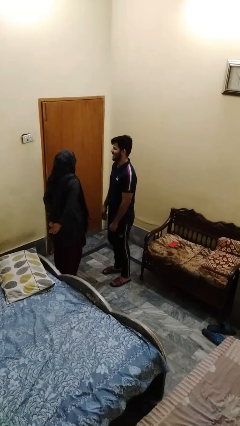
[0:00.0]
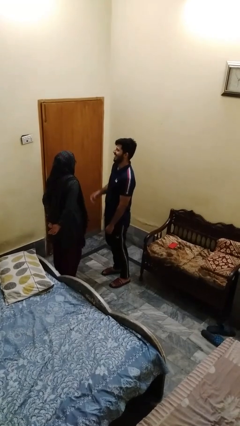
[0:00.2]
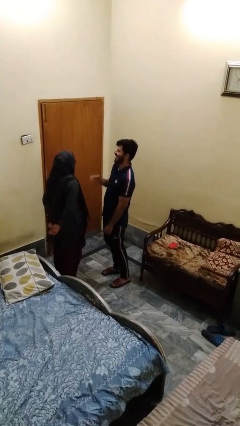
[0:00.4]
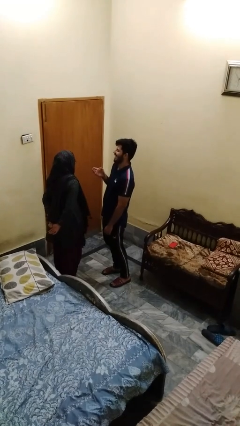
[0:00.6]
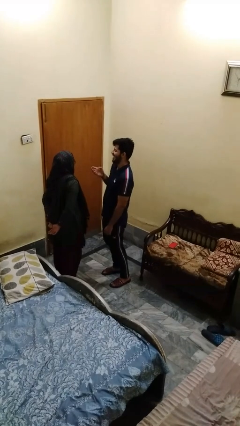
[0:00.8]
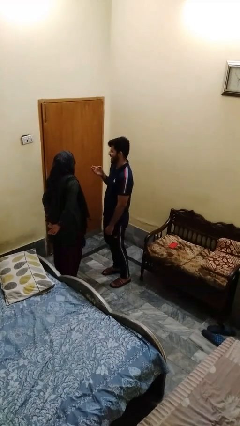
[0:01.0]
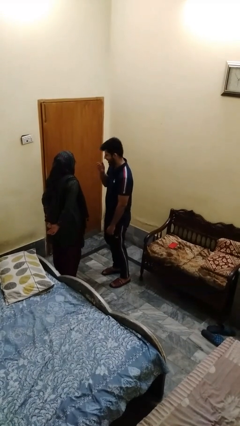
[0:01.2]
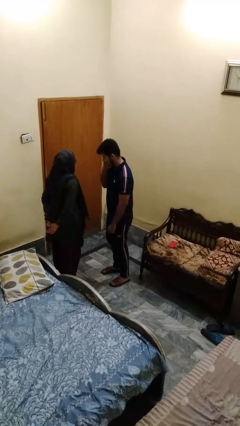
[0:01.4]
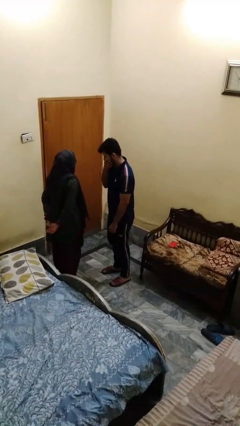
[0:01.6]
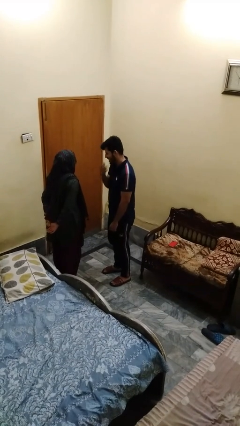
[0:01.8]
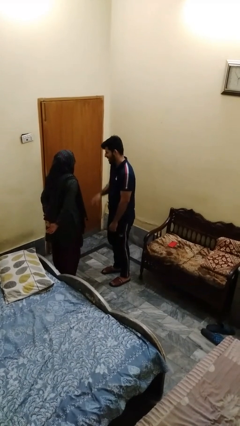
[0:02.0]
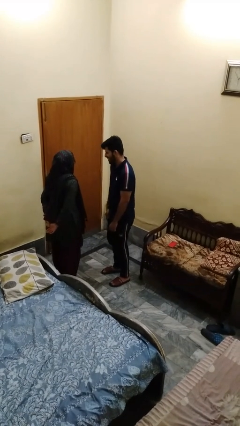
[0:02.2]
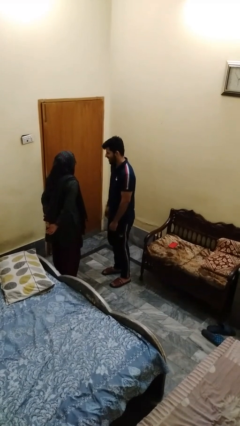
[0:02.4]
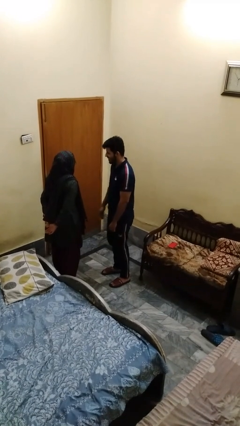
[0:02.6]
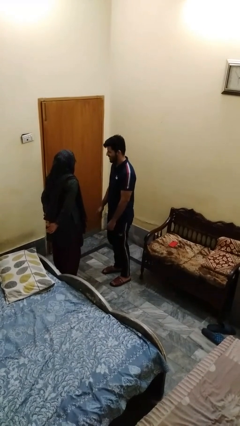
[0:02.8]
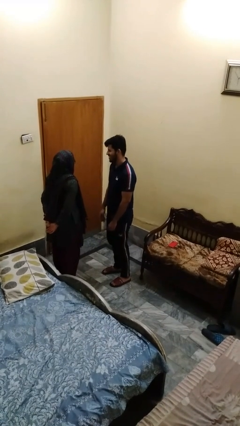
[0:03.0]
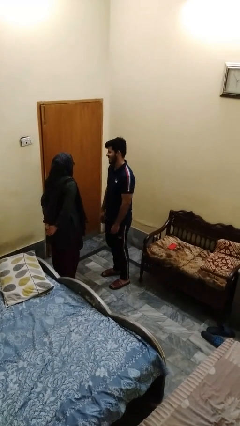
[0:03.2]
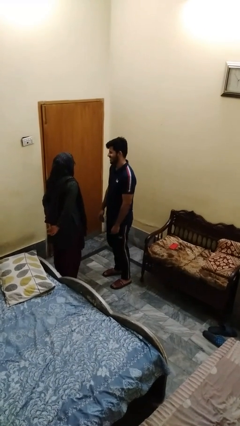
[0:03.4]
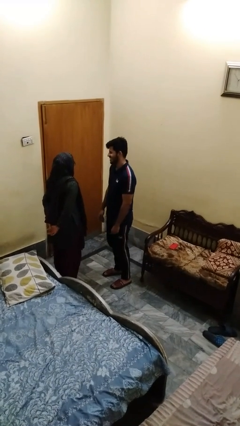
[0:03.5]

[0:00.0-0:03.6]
person laughs with person

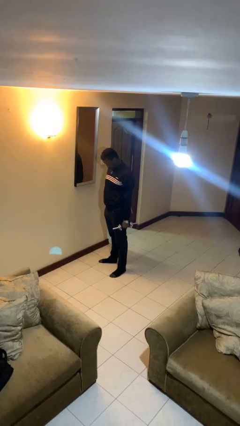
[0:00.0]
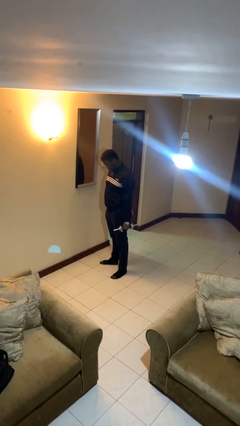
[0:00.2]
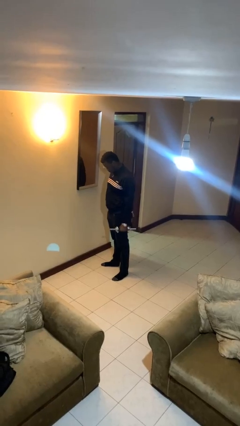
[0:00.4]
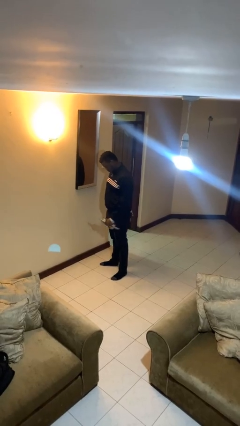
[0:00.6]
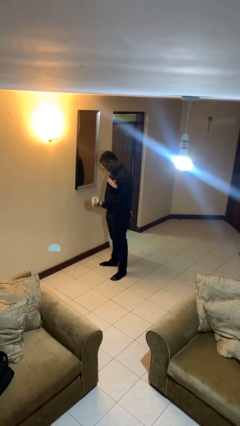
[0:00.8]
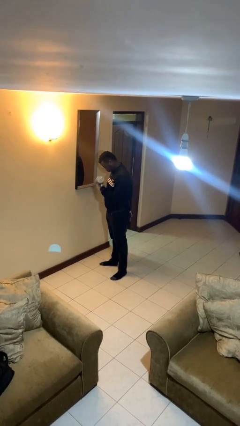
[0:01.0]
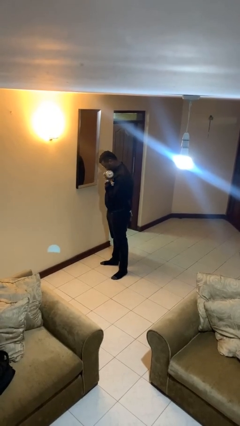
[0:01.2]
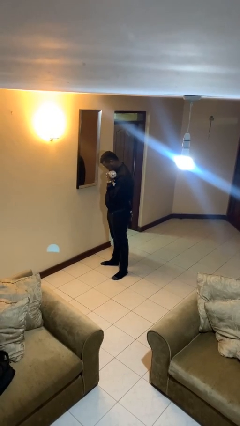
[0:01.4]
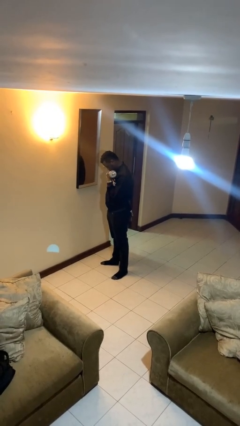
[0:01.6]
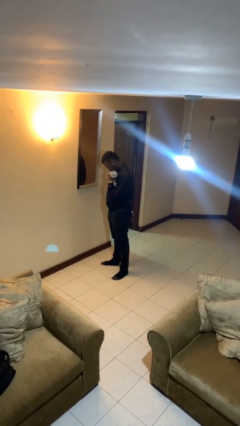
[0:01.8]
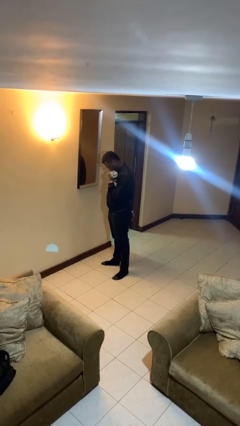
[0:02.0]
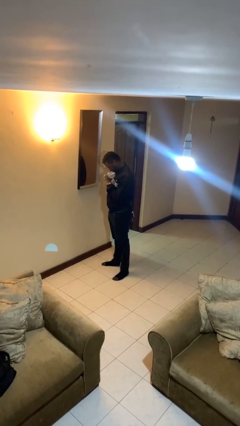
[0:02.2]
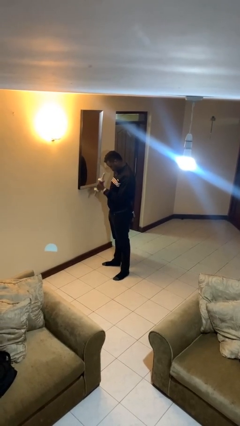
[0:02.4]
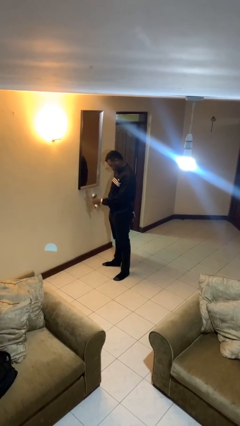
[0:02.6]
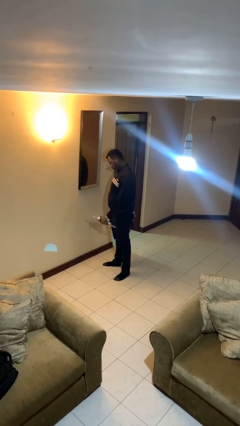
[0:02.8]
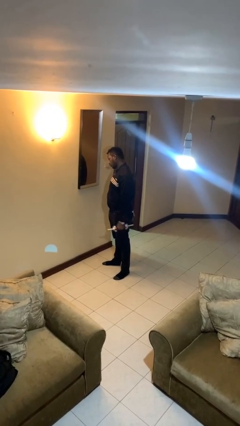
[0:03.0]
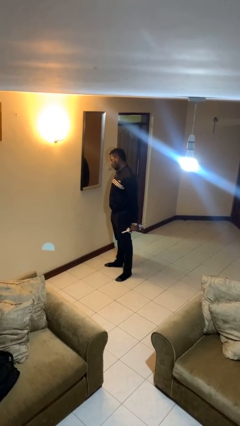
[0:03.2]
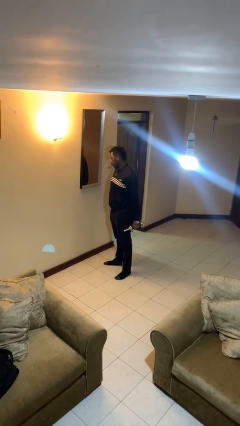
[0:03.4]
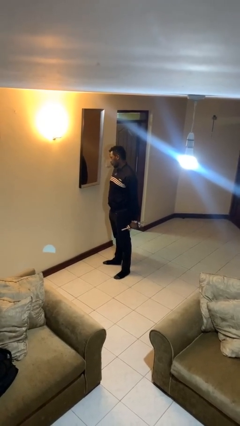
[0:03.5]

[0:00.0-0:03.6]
person lifts dumbbells

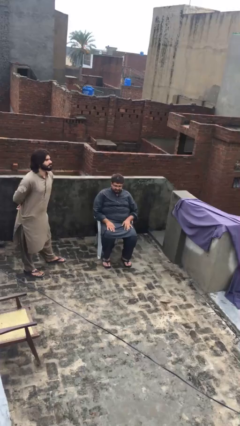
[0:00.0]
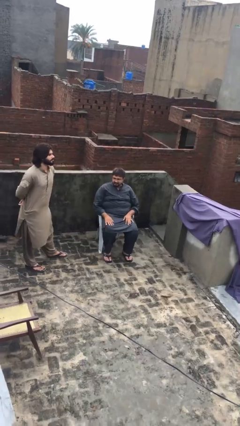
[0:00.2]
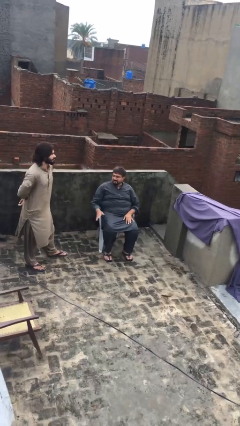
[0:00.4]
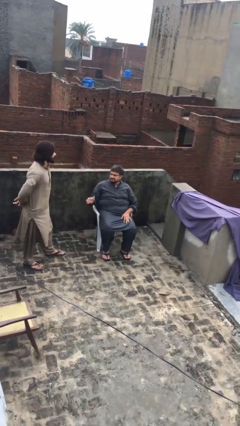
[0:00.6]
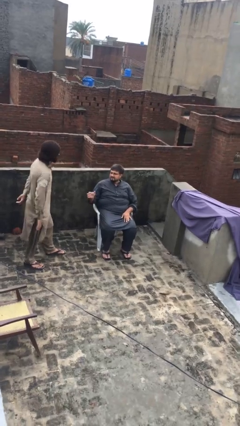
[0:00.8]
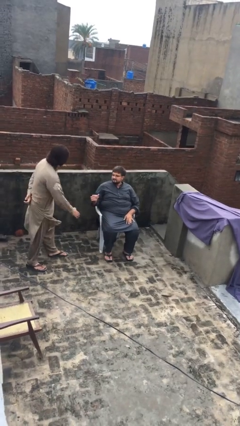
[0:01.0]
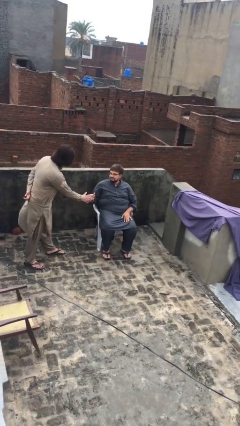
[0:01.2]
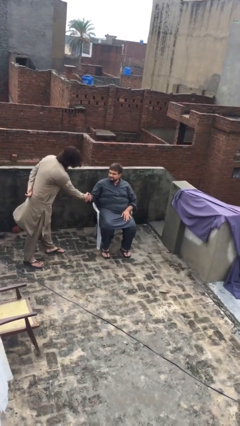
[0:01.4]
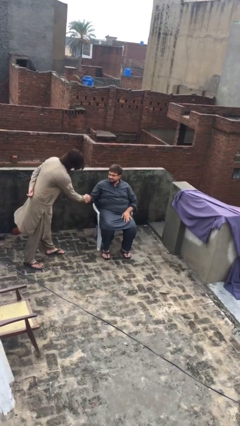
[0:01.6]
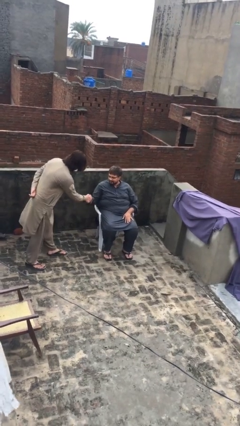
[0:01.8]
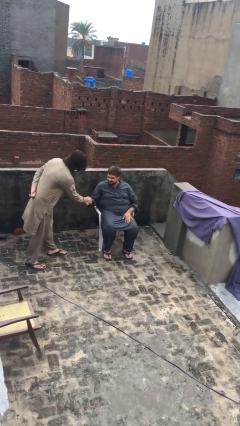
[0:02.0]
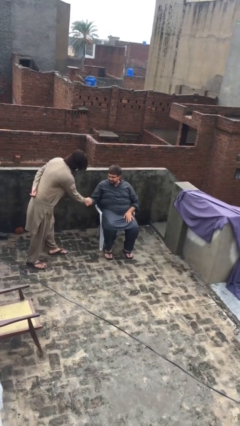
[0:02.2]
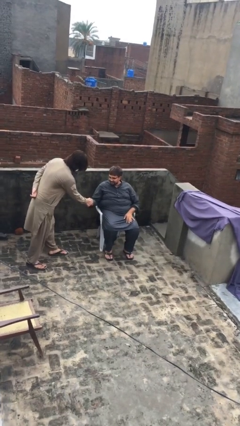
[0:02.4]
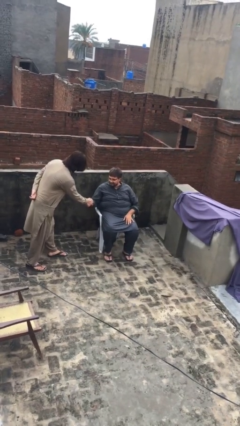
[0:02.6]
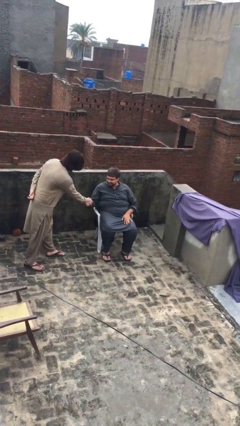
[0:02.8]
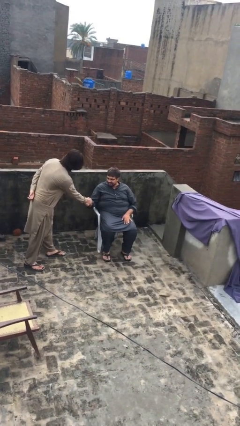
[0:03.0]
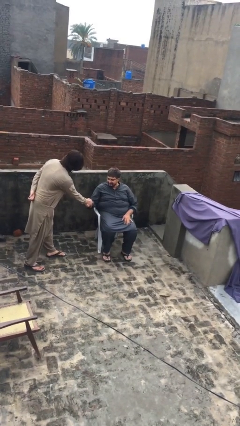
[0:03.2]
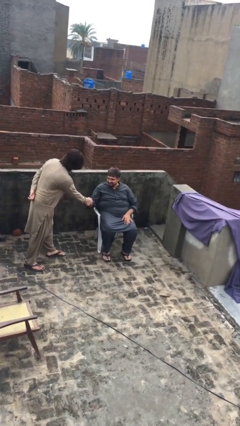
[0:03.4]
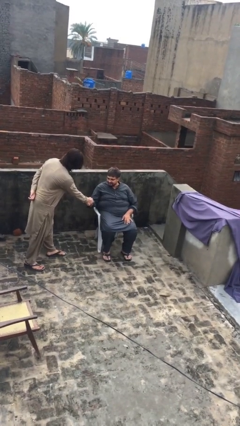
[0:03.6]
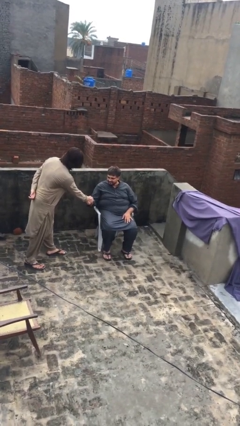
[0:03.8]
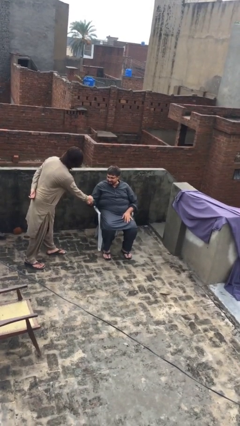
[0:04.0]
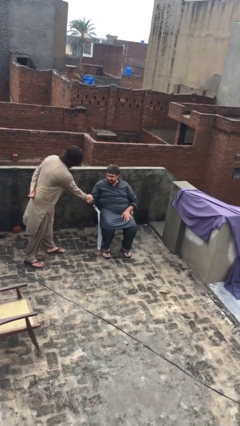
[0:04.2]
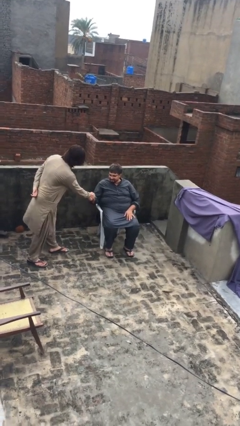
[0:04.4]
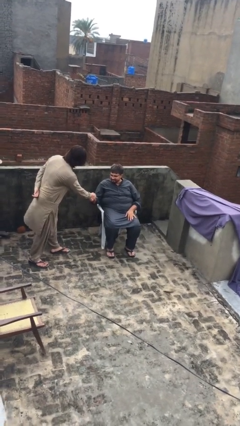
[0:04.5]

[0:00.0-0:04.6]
person shakes hand

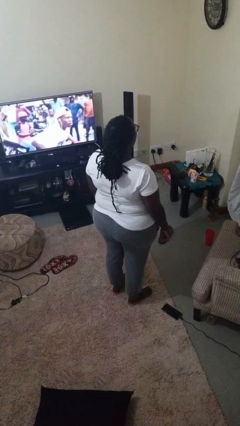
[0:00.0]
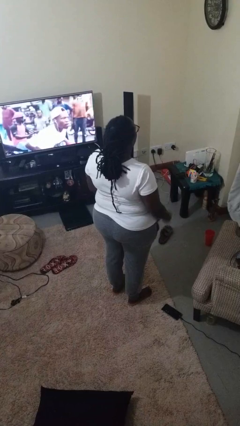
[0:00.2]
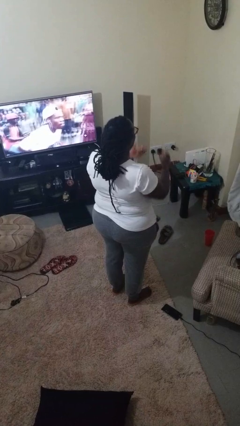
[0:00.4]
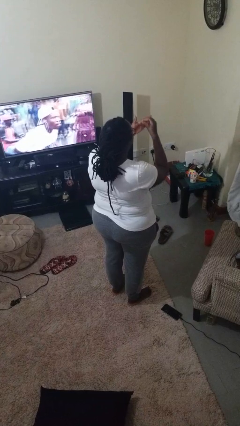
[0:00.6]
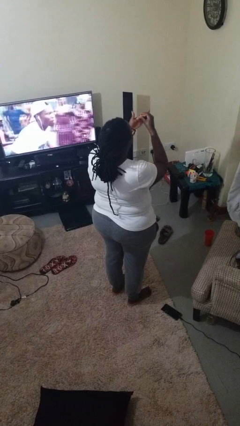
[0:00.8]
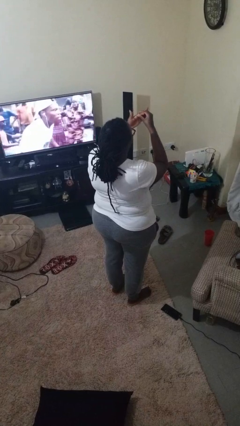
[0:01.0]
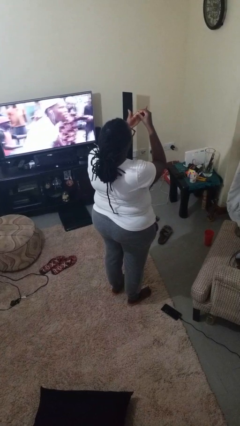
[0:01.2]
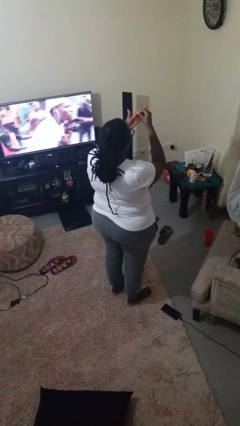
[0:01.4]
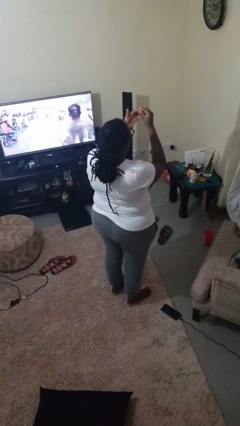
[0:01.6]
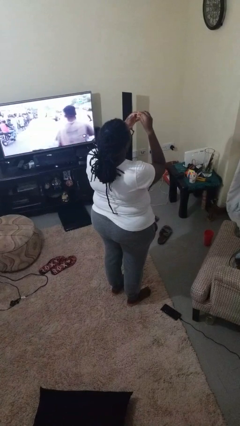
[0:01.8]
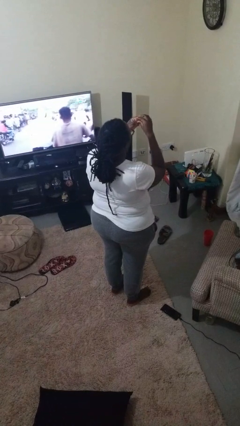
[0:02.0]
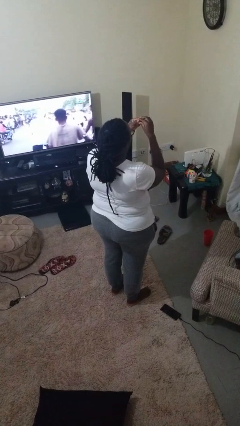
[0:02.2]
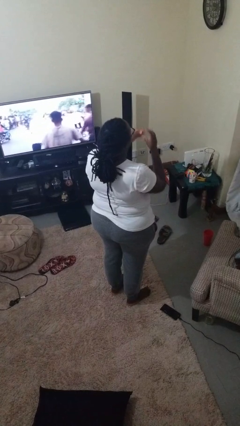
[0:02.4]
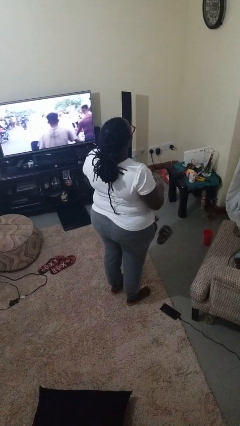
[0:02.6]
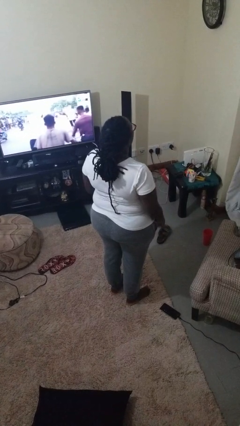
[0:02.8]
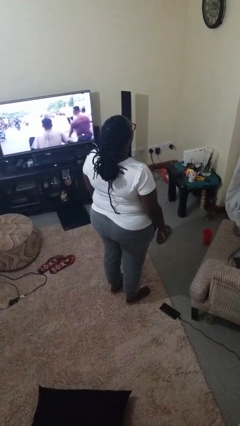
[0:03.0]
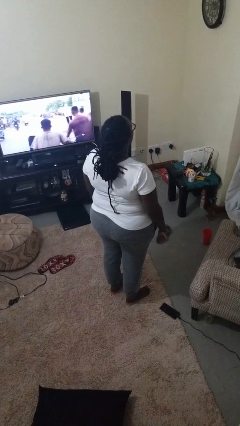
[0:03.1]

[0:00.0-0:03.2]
person takes off ring

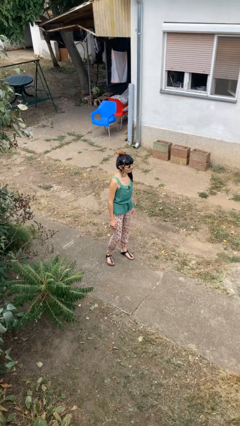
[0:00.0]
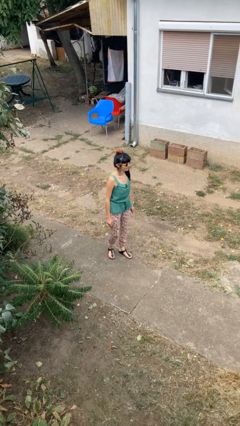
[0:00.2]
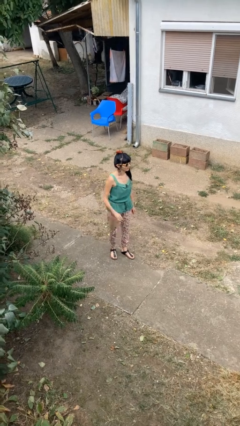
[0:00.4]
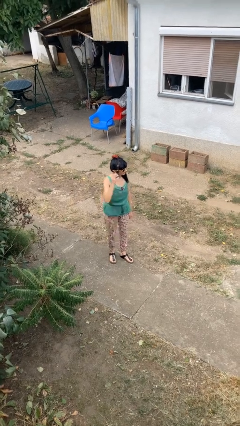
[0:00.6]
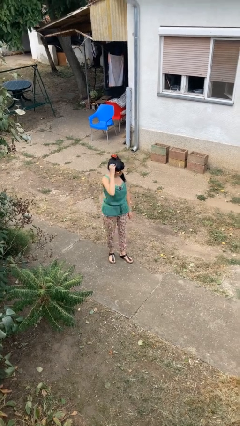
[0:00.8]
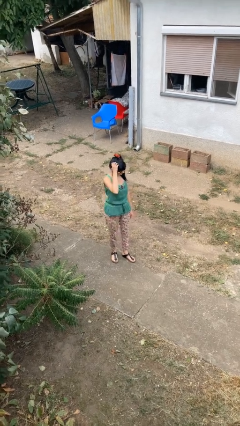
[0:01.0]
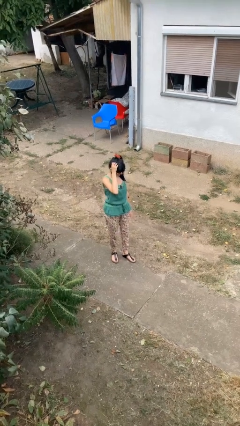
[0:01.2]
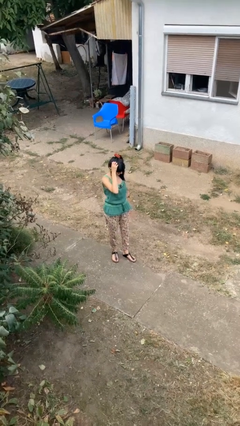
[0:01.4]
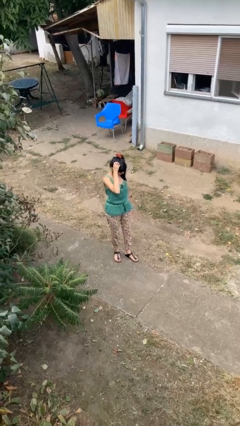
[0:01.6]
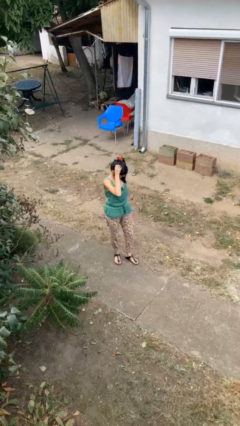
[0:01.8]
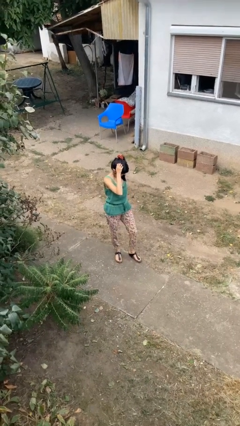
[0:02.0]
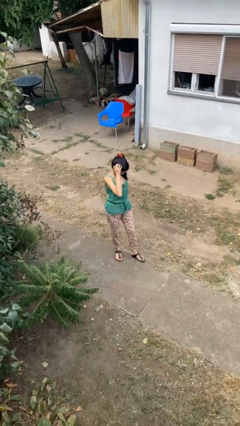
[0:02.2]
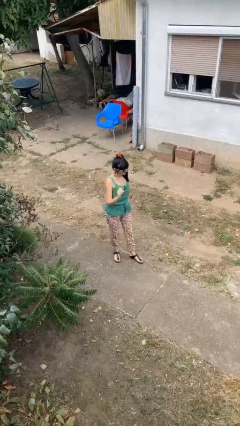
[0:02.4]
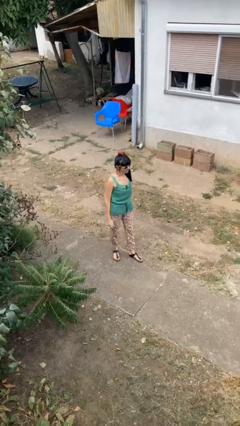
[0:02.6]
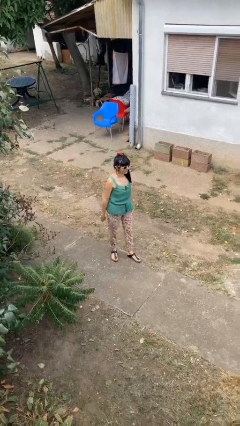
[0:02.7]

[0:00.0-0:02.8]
person scratches face

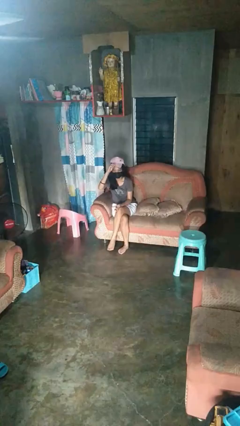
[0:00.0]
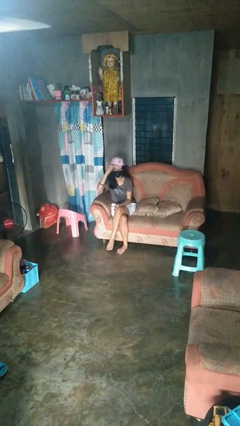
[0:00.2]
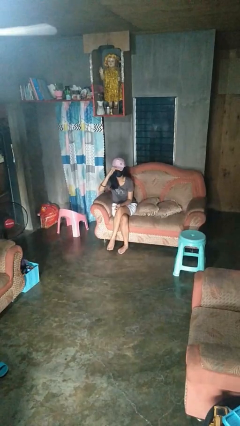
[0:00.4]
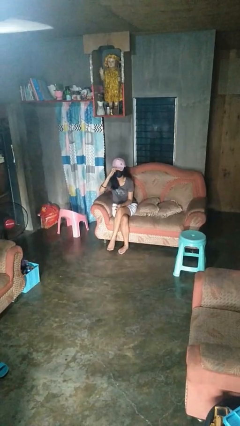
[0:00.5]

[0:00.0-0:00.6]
person puts on hat
